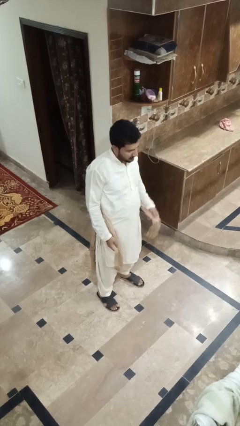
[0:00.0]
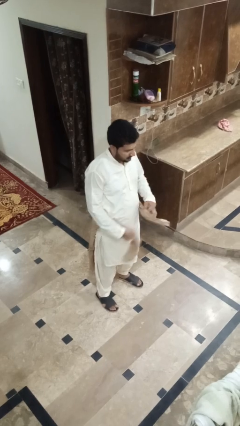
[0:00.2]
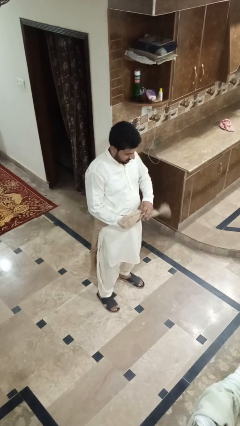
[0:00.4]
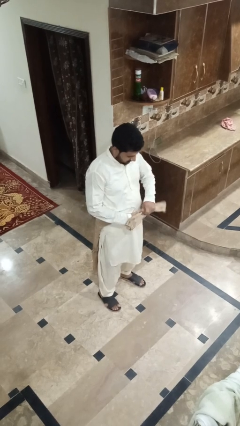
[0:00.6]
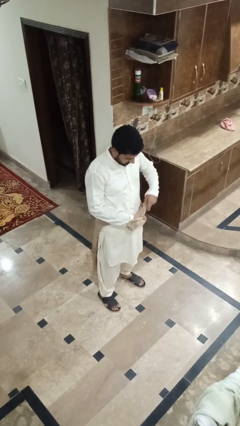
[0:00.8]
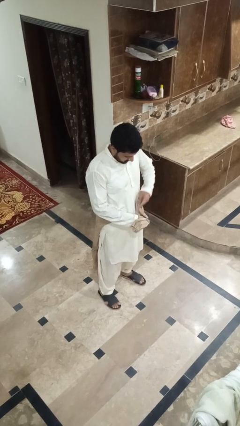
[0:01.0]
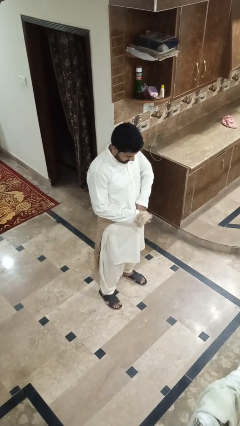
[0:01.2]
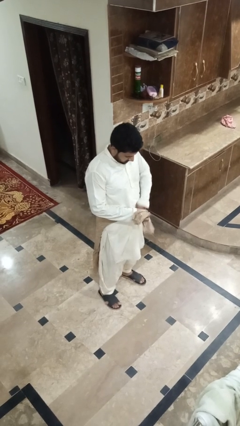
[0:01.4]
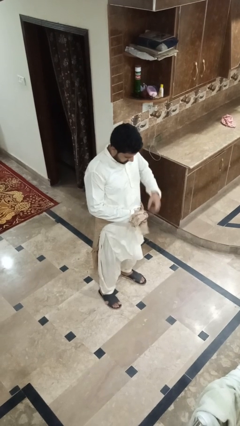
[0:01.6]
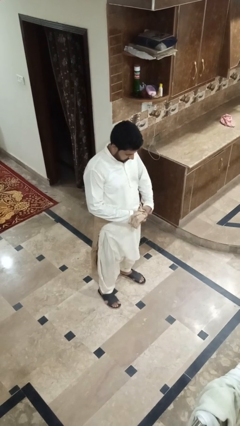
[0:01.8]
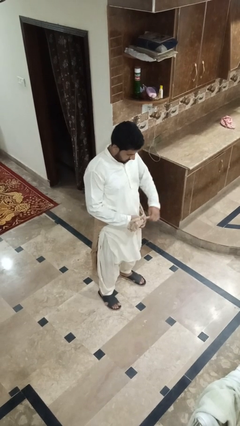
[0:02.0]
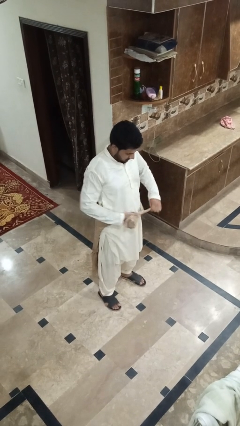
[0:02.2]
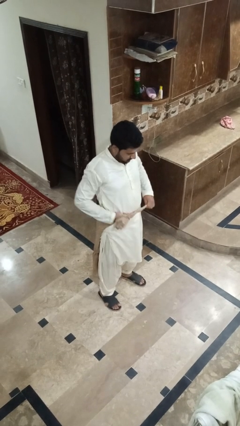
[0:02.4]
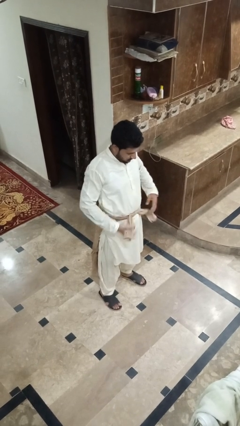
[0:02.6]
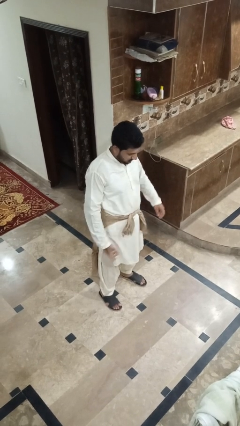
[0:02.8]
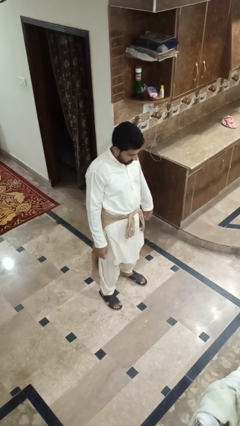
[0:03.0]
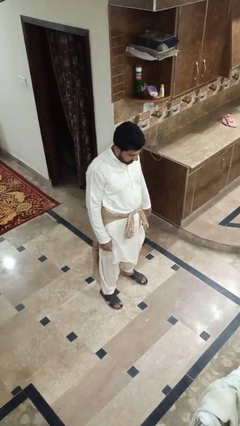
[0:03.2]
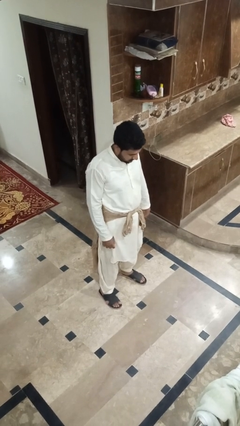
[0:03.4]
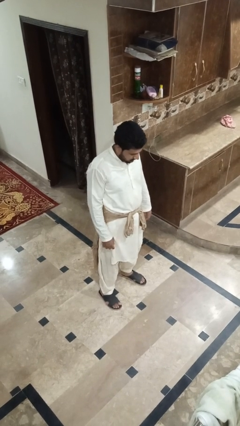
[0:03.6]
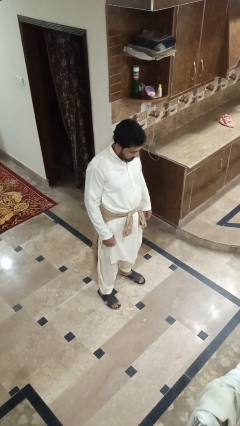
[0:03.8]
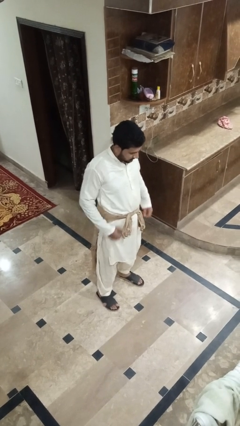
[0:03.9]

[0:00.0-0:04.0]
person ties jacket around waist

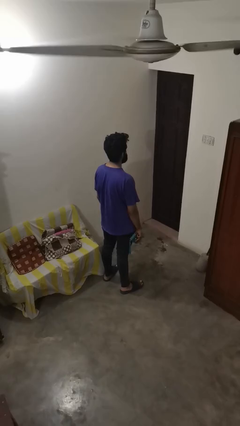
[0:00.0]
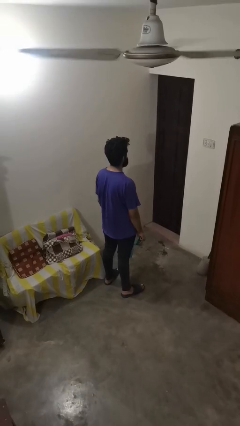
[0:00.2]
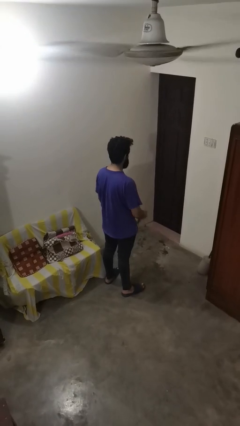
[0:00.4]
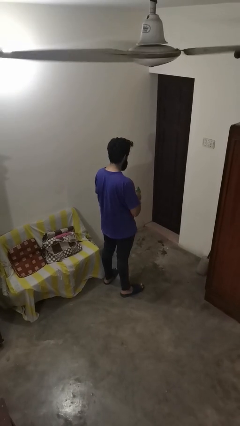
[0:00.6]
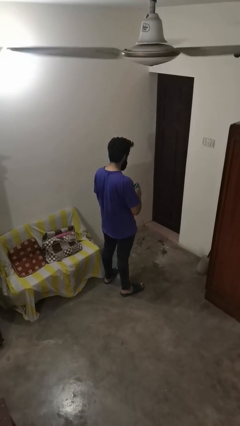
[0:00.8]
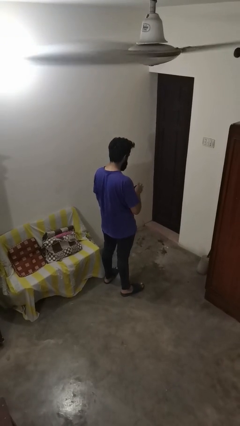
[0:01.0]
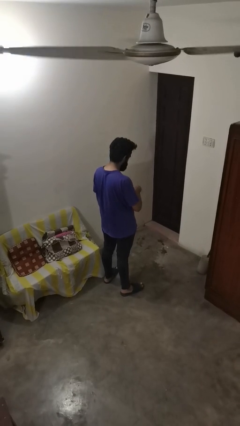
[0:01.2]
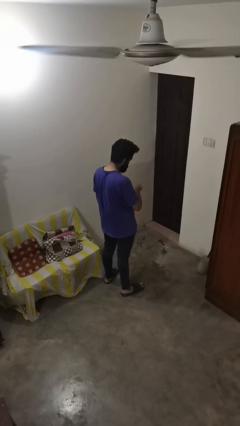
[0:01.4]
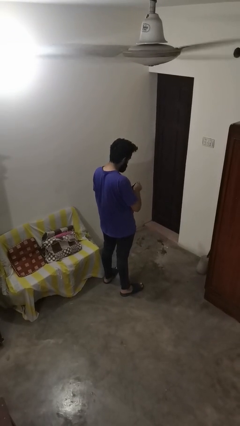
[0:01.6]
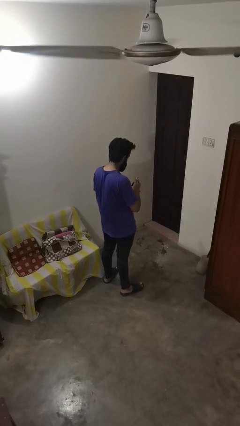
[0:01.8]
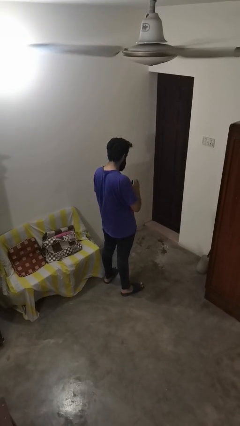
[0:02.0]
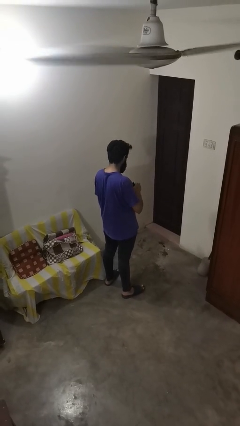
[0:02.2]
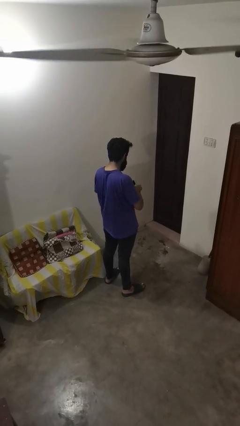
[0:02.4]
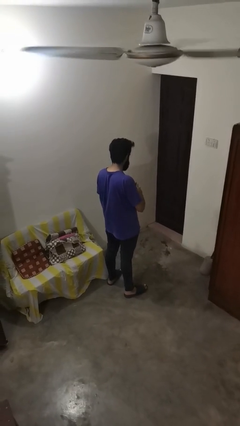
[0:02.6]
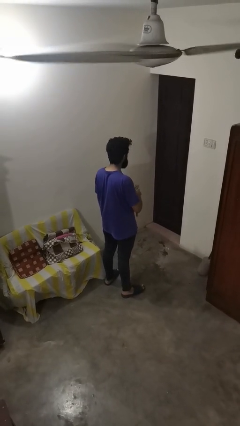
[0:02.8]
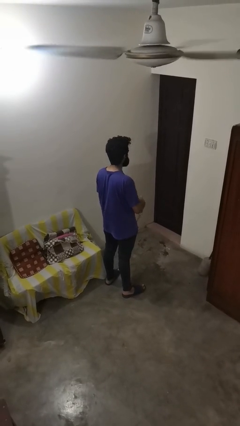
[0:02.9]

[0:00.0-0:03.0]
person searches in bag

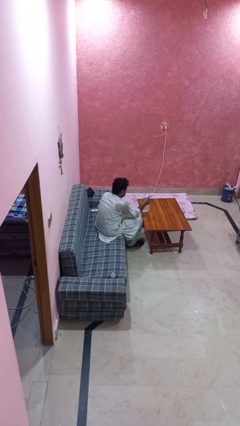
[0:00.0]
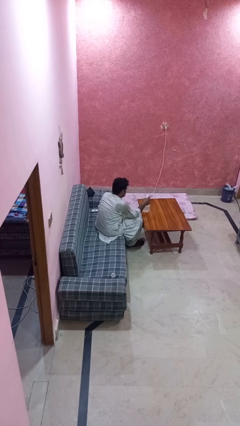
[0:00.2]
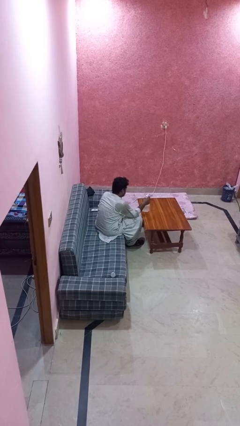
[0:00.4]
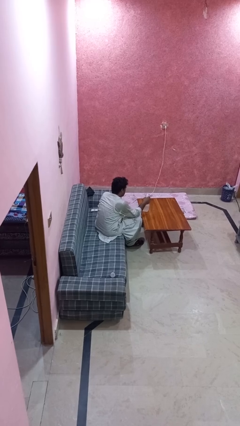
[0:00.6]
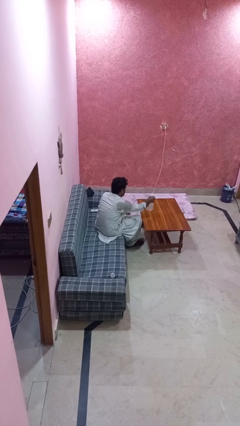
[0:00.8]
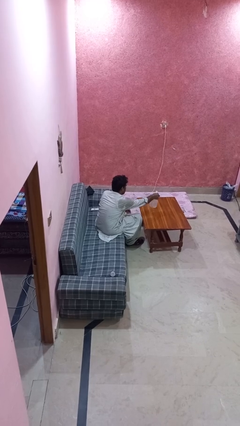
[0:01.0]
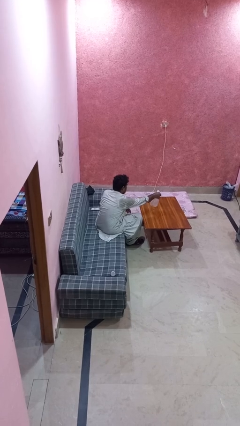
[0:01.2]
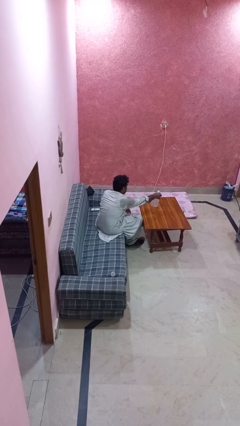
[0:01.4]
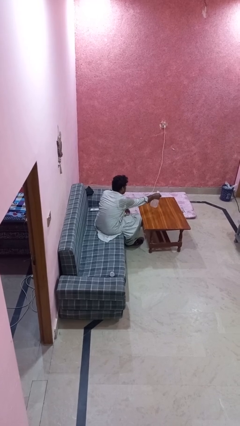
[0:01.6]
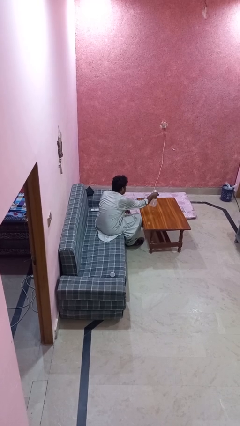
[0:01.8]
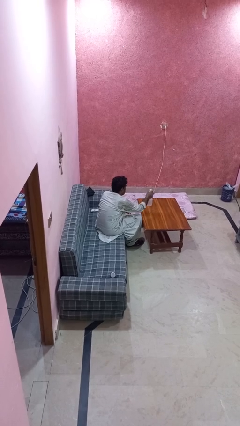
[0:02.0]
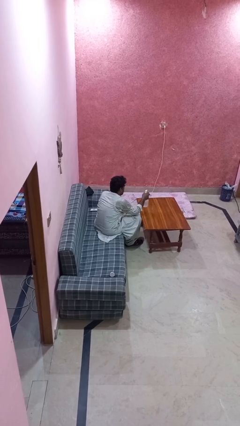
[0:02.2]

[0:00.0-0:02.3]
person sprays from bottle

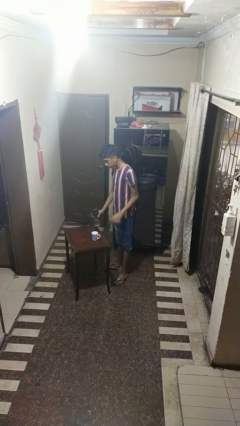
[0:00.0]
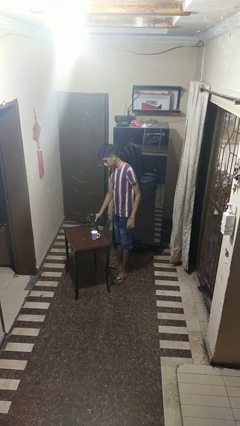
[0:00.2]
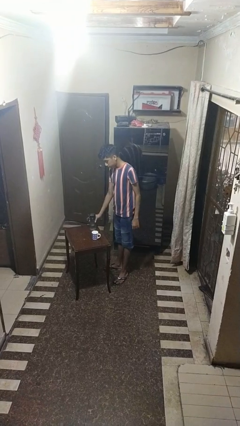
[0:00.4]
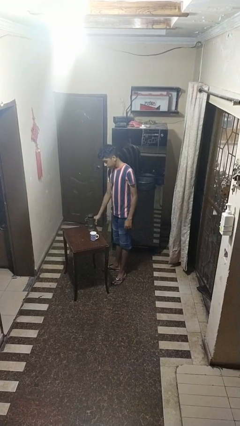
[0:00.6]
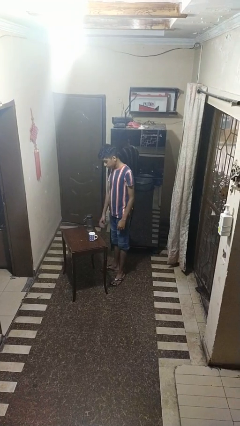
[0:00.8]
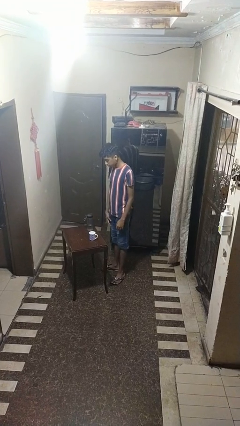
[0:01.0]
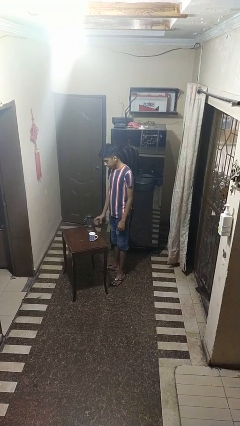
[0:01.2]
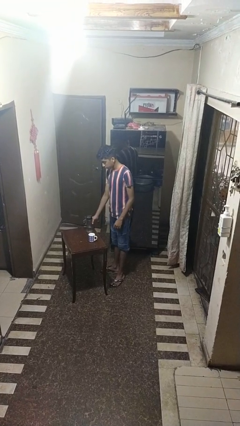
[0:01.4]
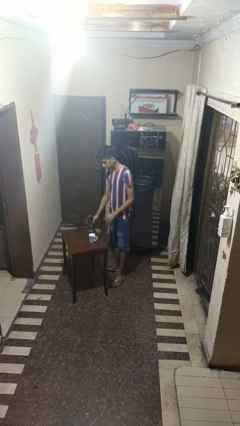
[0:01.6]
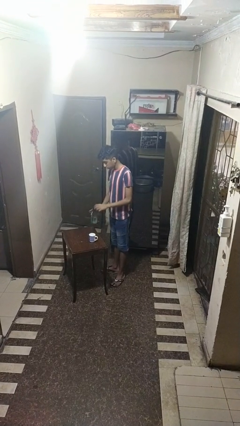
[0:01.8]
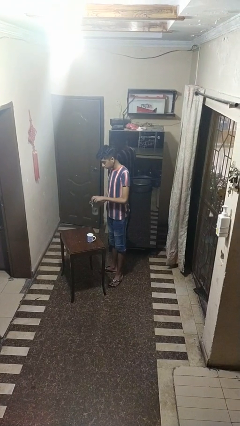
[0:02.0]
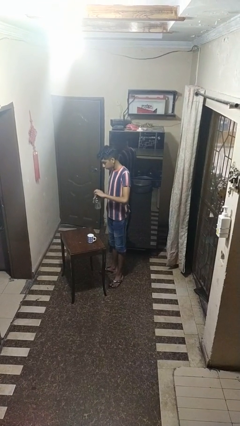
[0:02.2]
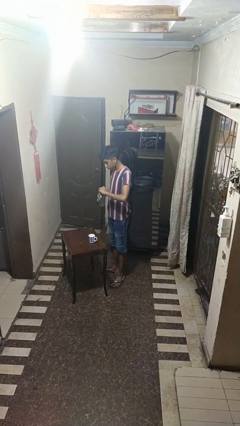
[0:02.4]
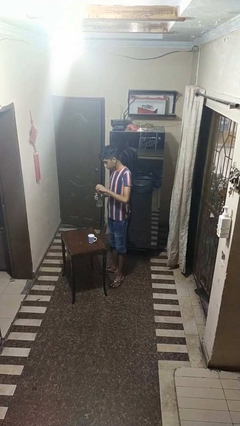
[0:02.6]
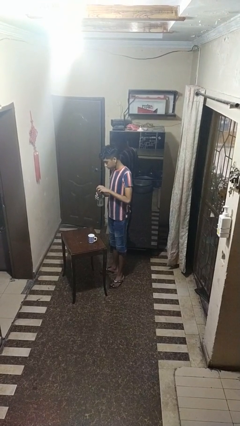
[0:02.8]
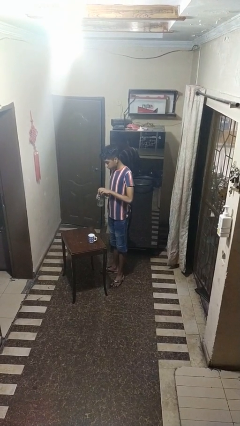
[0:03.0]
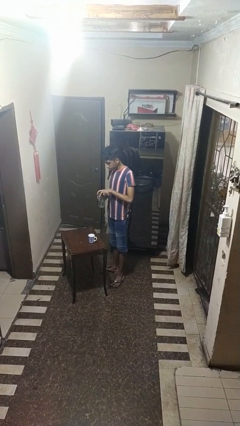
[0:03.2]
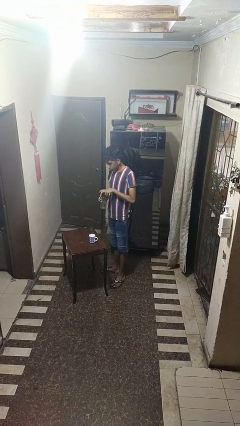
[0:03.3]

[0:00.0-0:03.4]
person unscrews lid from bottle

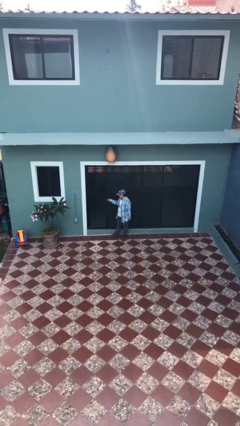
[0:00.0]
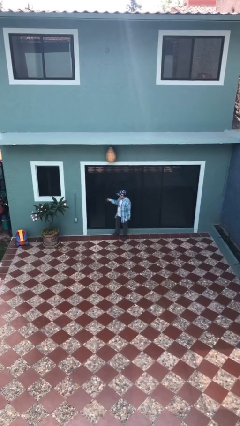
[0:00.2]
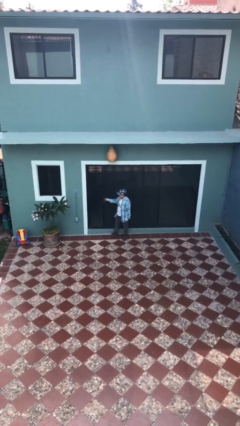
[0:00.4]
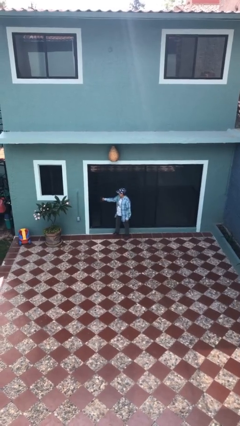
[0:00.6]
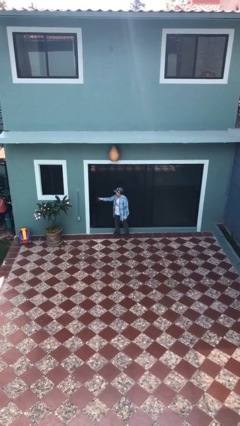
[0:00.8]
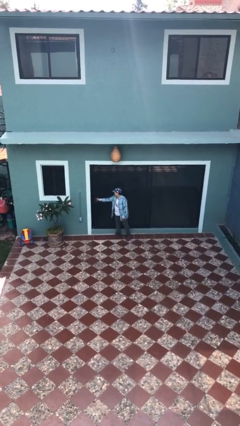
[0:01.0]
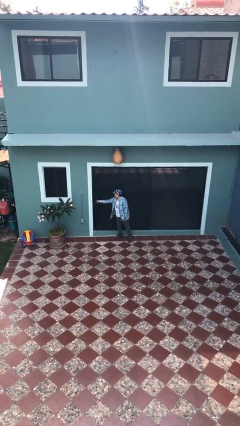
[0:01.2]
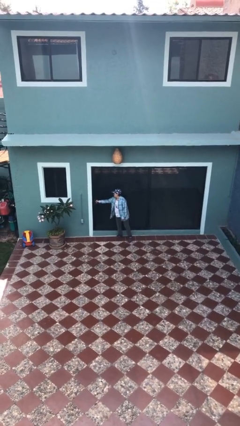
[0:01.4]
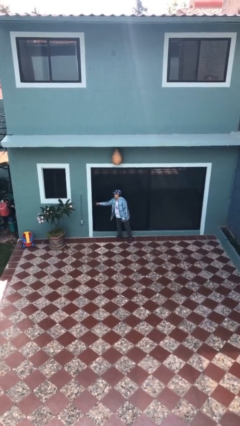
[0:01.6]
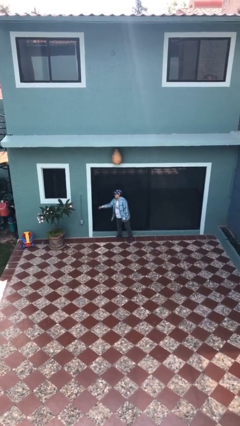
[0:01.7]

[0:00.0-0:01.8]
person closes sliding door

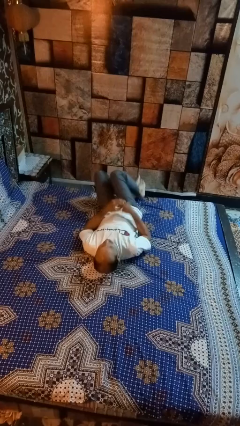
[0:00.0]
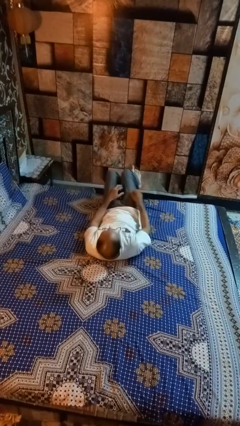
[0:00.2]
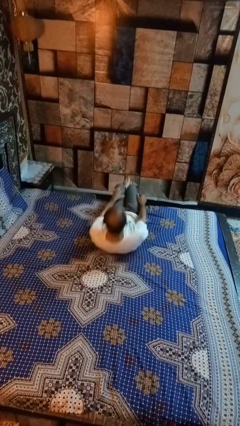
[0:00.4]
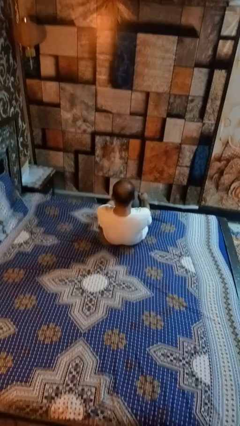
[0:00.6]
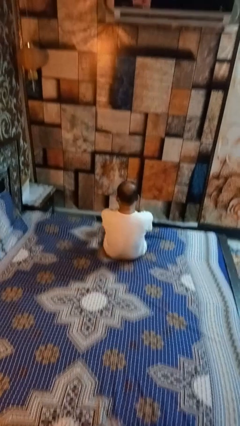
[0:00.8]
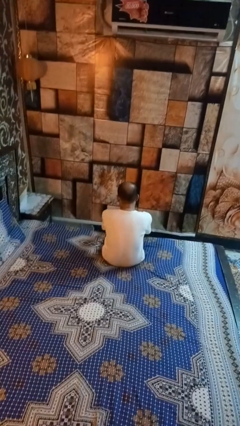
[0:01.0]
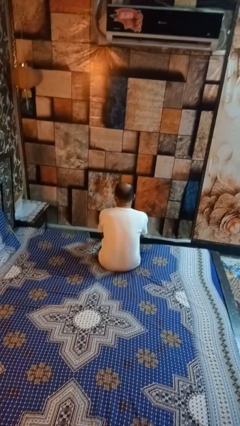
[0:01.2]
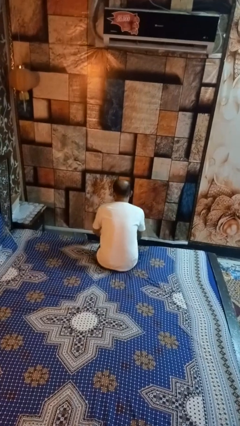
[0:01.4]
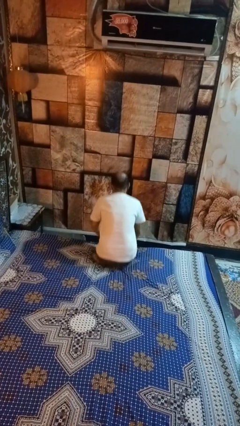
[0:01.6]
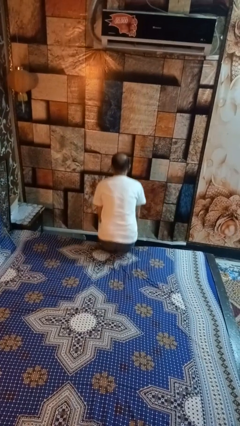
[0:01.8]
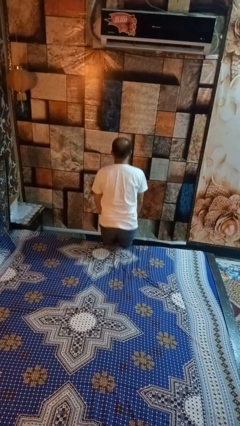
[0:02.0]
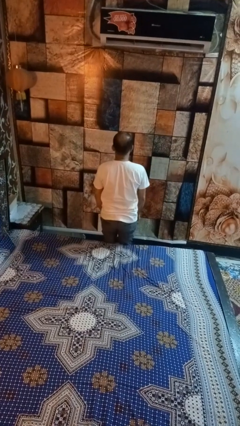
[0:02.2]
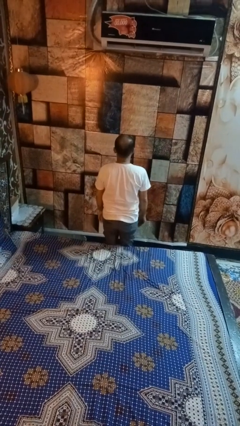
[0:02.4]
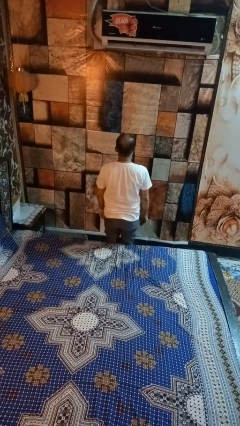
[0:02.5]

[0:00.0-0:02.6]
person stands up

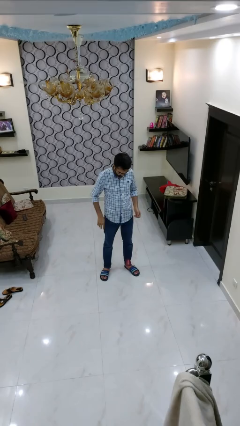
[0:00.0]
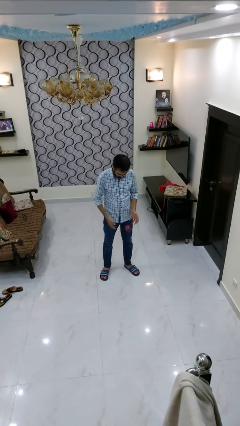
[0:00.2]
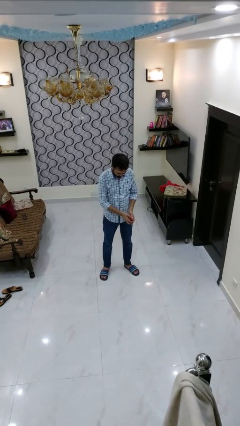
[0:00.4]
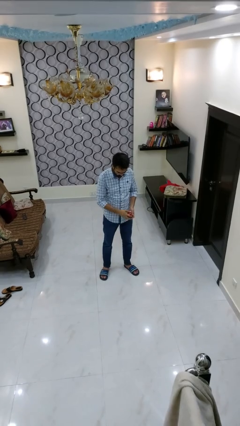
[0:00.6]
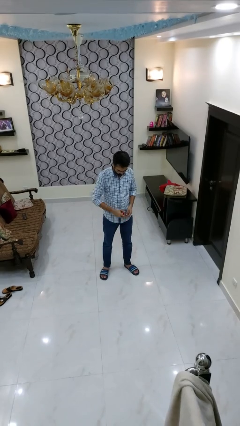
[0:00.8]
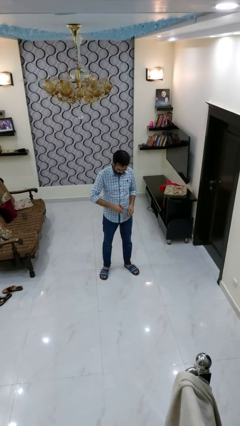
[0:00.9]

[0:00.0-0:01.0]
person bounces ball on floor
